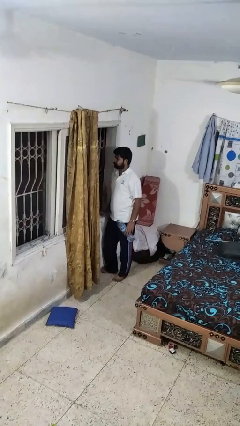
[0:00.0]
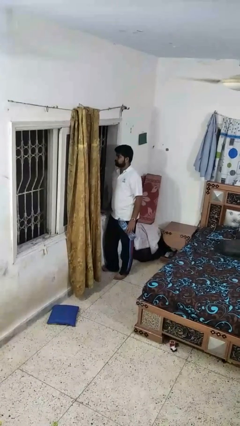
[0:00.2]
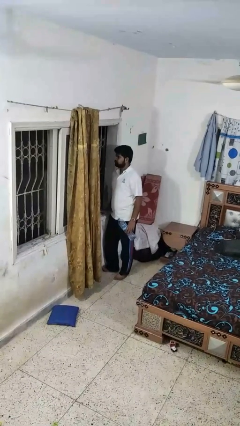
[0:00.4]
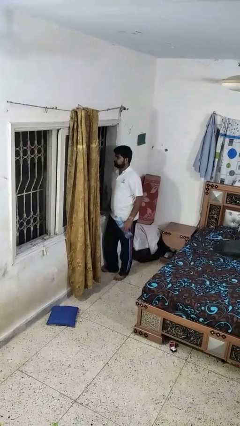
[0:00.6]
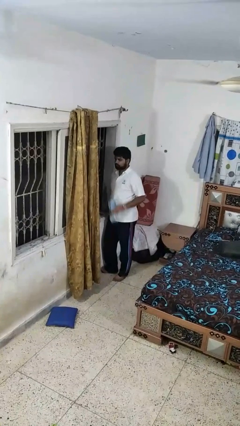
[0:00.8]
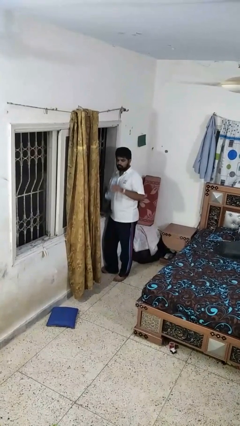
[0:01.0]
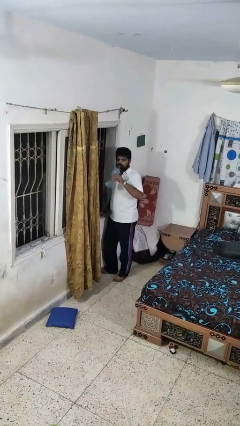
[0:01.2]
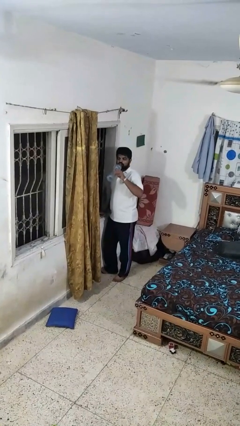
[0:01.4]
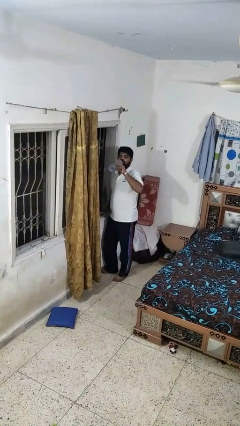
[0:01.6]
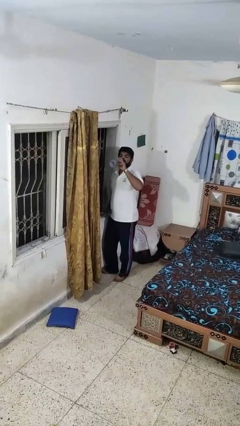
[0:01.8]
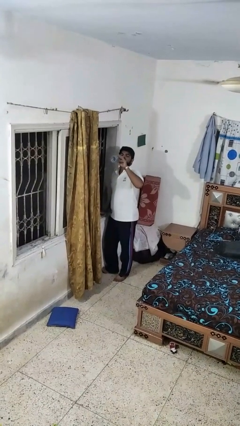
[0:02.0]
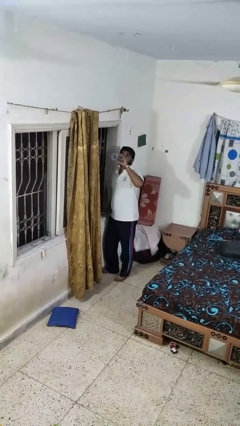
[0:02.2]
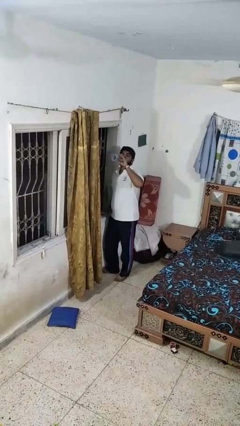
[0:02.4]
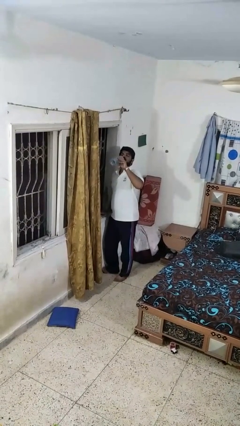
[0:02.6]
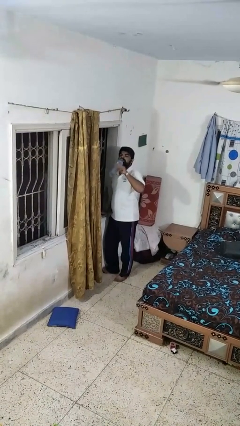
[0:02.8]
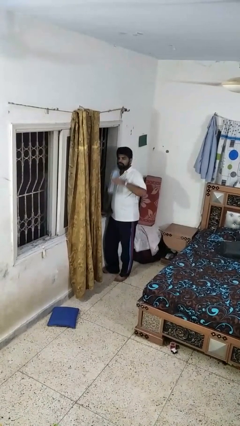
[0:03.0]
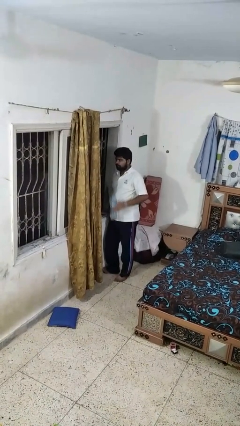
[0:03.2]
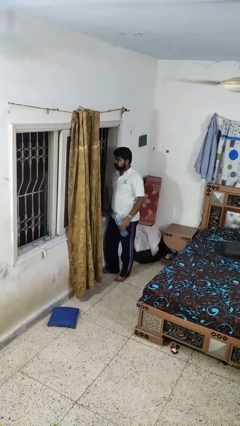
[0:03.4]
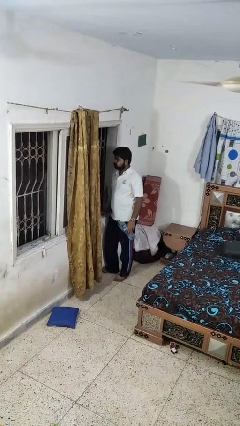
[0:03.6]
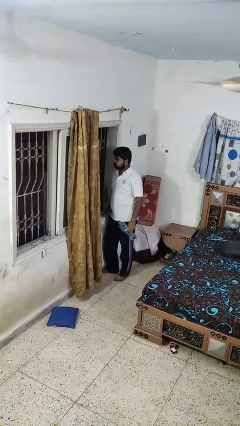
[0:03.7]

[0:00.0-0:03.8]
person drinks from bottle

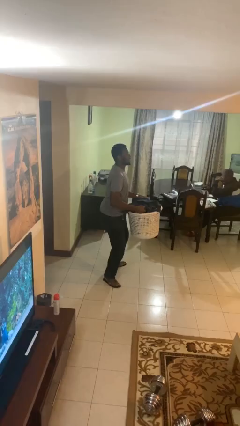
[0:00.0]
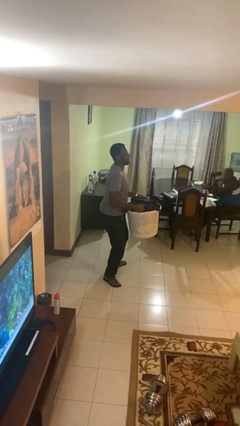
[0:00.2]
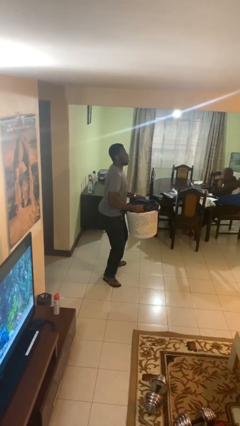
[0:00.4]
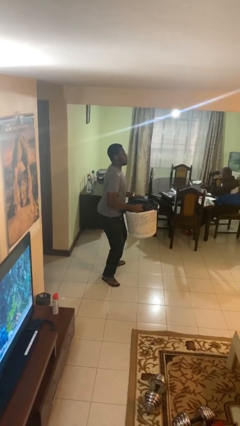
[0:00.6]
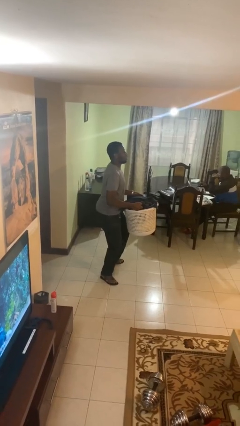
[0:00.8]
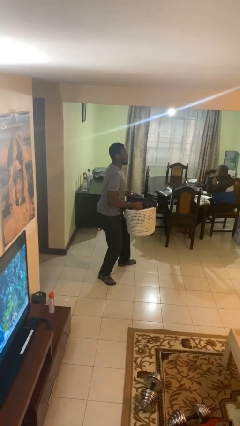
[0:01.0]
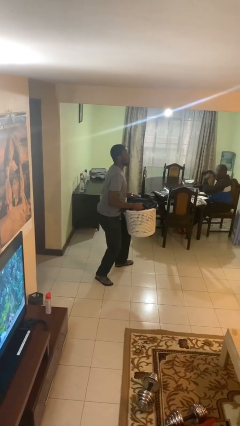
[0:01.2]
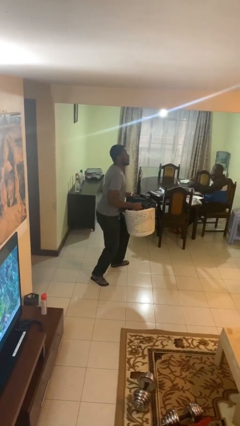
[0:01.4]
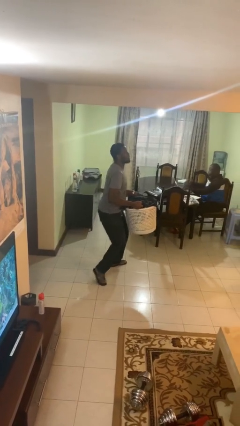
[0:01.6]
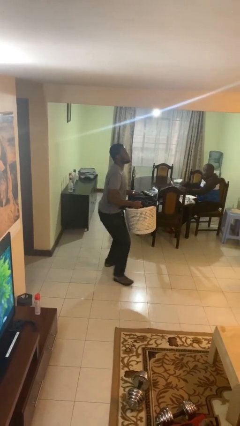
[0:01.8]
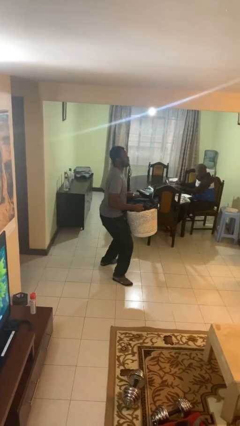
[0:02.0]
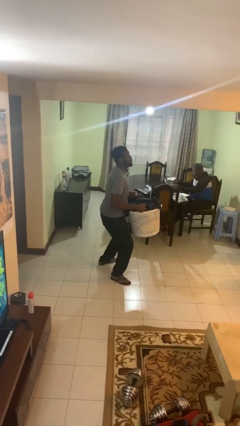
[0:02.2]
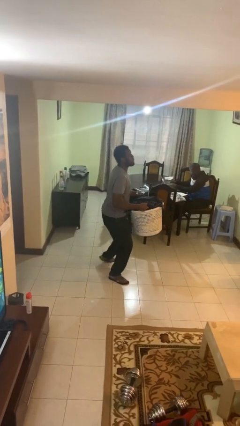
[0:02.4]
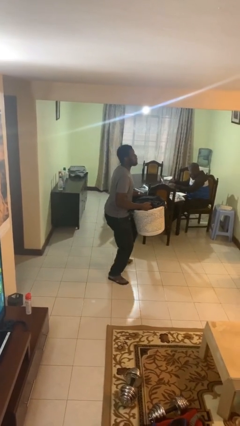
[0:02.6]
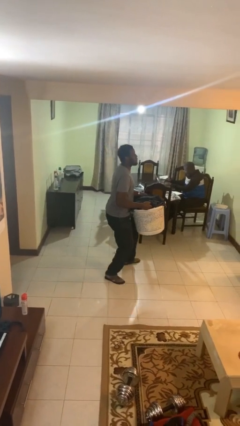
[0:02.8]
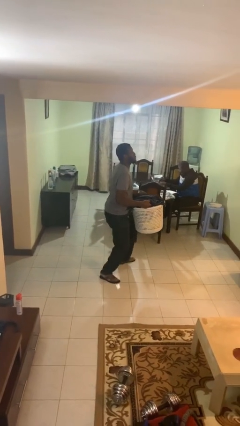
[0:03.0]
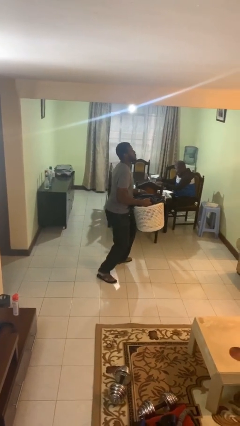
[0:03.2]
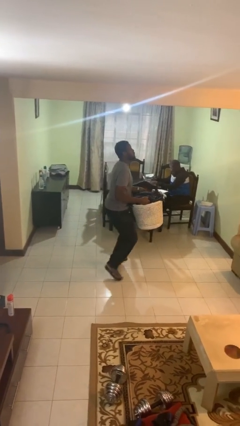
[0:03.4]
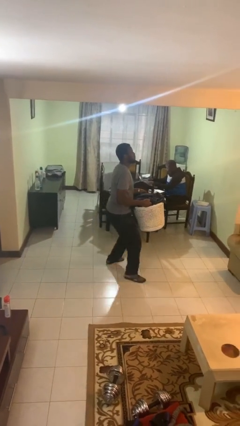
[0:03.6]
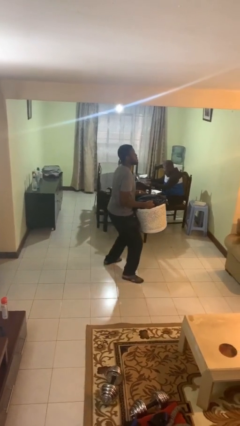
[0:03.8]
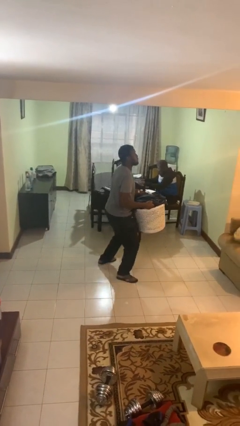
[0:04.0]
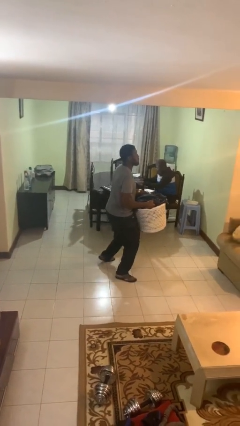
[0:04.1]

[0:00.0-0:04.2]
person carries heavy object

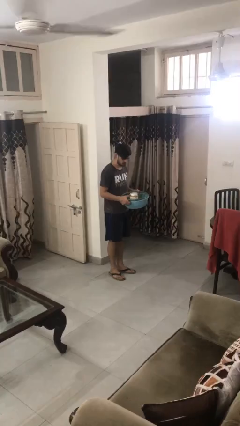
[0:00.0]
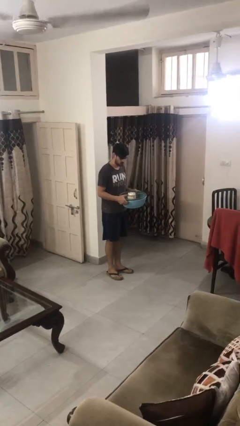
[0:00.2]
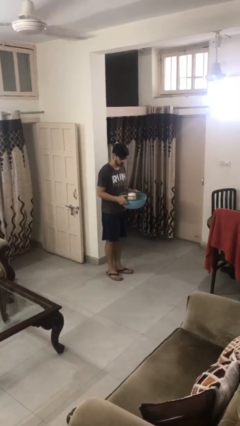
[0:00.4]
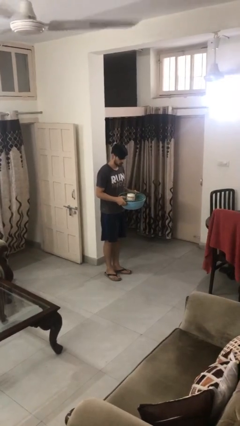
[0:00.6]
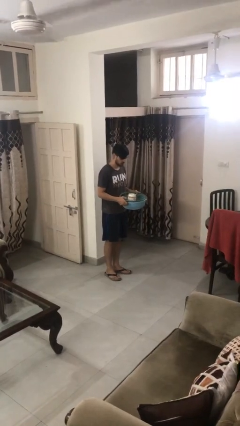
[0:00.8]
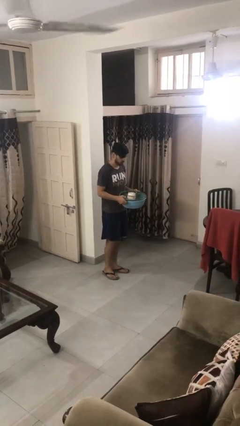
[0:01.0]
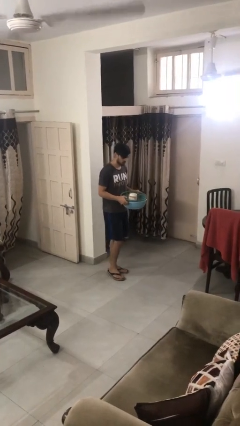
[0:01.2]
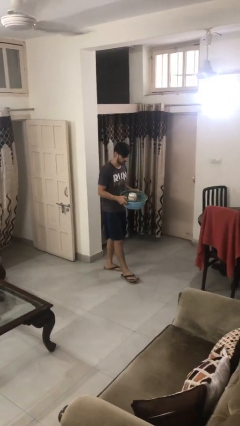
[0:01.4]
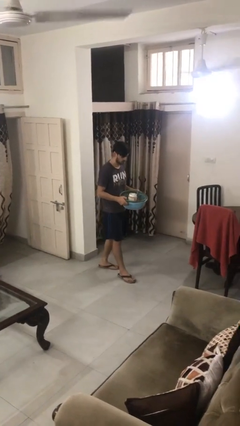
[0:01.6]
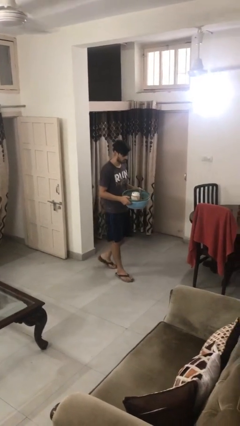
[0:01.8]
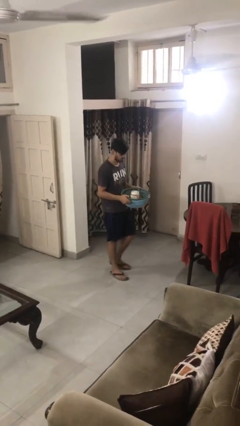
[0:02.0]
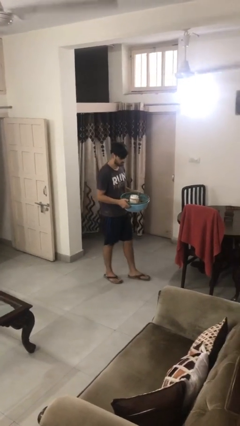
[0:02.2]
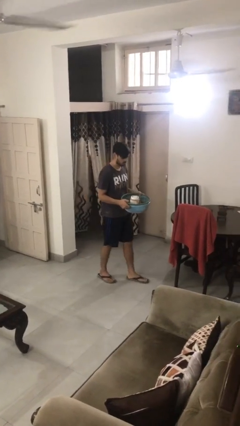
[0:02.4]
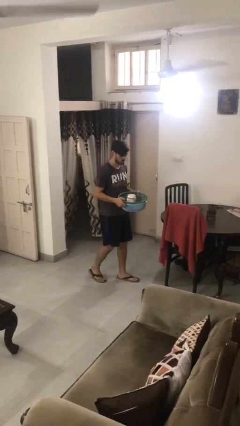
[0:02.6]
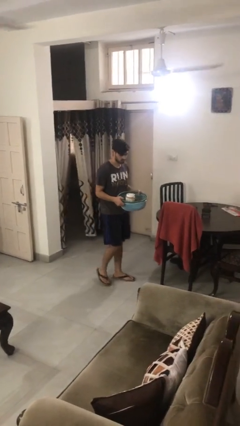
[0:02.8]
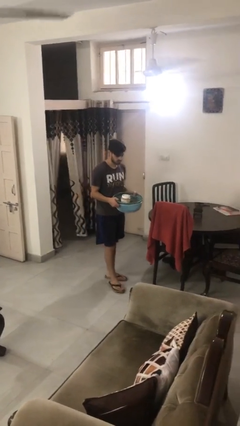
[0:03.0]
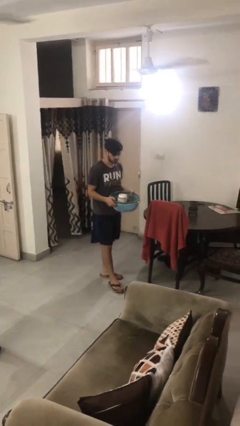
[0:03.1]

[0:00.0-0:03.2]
person carries groceries

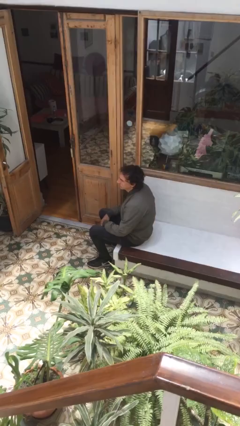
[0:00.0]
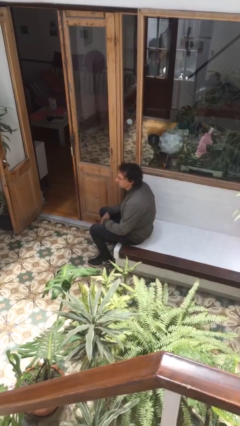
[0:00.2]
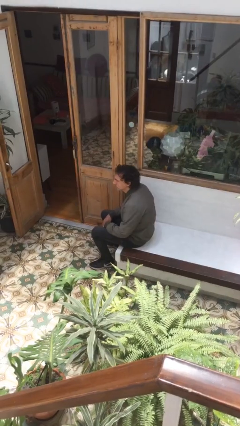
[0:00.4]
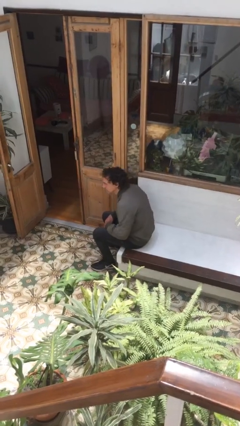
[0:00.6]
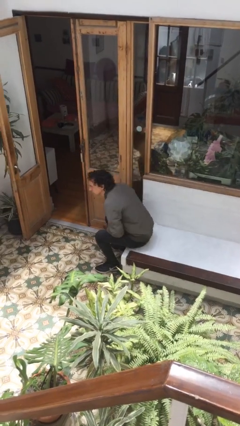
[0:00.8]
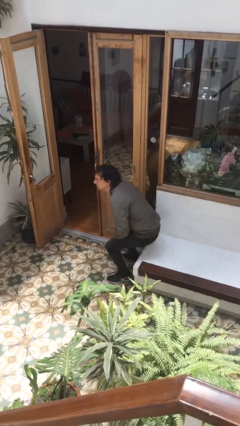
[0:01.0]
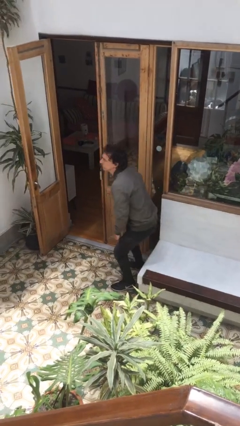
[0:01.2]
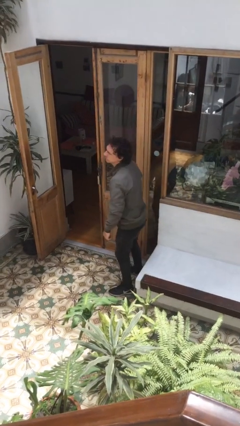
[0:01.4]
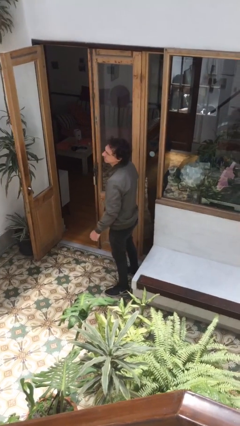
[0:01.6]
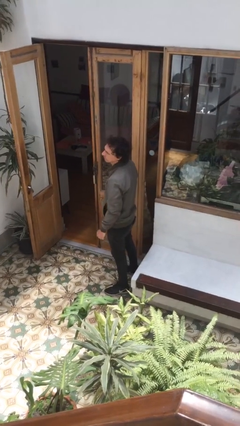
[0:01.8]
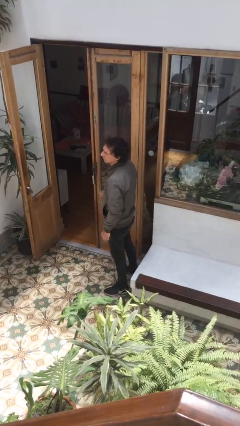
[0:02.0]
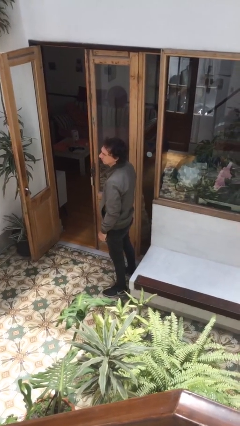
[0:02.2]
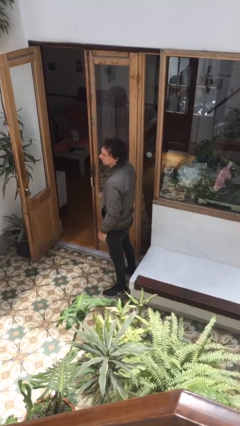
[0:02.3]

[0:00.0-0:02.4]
person stands up

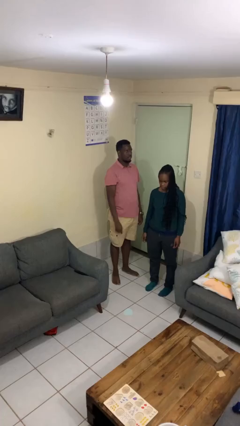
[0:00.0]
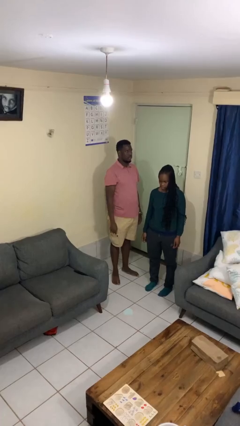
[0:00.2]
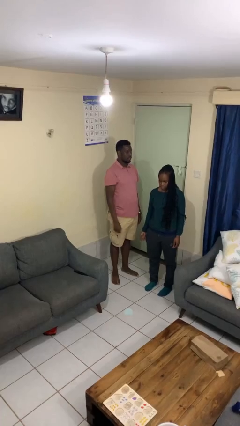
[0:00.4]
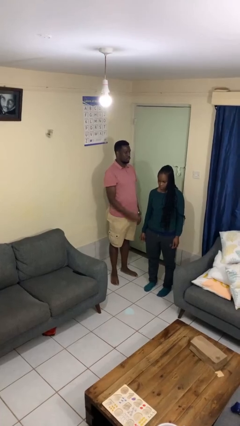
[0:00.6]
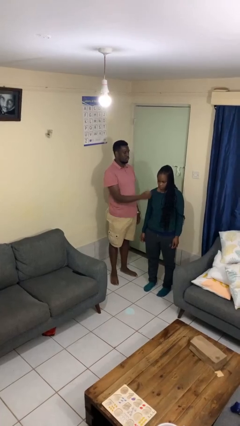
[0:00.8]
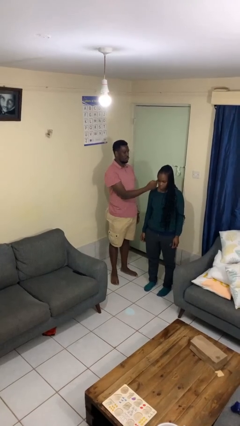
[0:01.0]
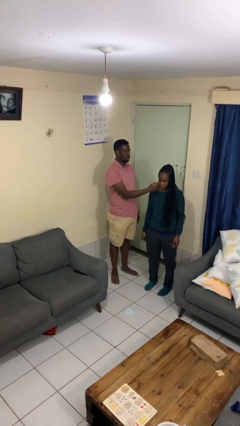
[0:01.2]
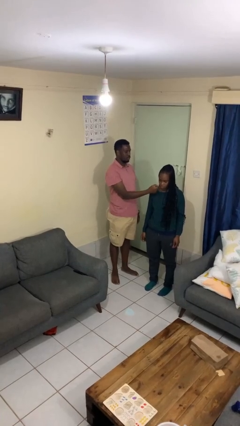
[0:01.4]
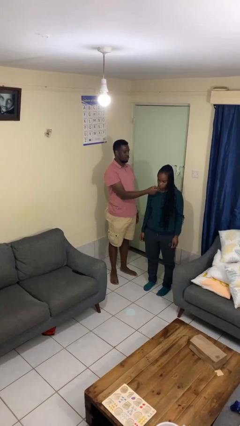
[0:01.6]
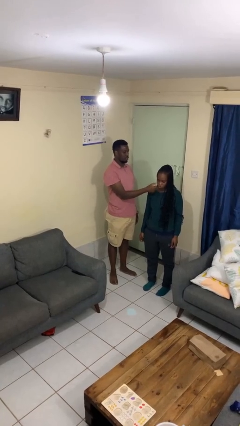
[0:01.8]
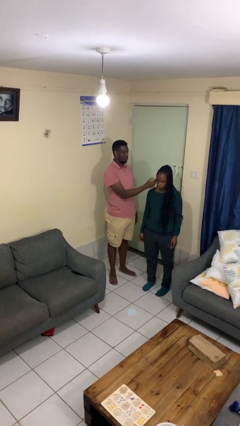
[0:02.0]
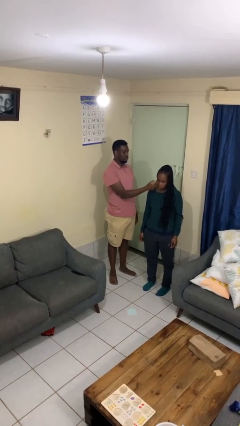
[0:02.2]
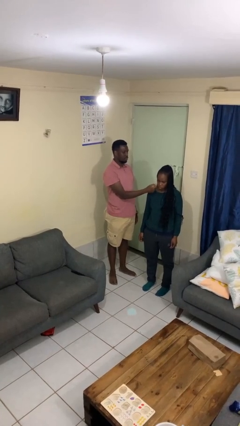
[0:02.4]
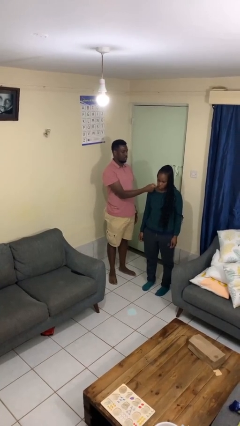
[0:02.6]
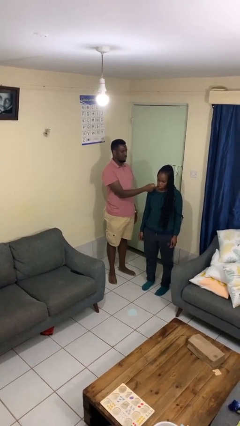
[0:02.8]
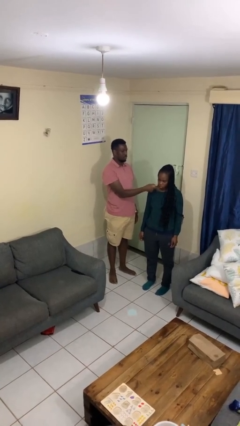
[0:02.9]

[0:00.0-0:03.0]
person touches face of person

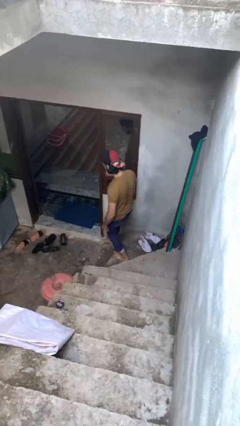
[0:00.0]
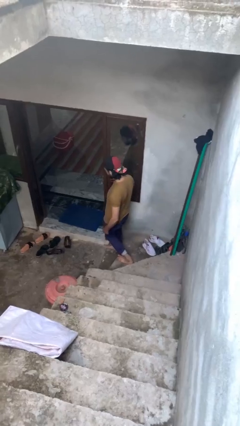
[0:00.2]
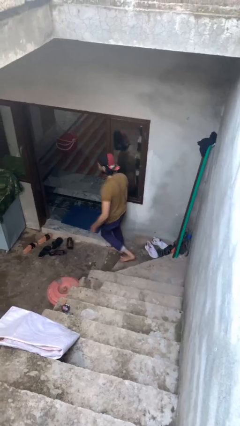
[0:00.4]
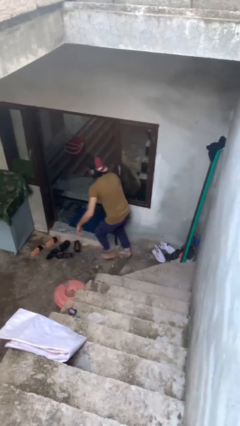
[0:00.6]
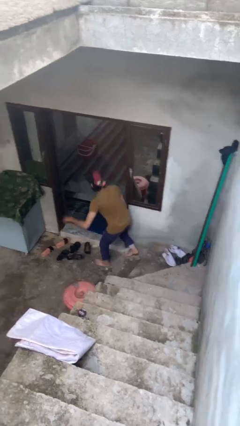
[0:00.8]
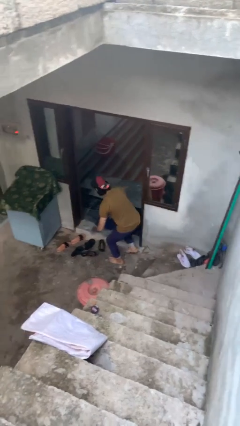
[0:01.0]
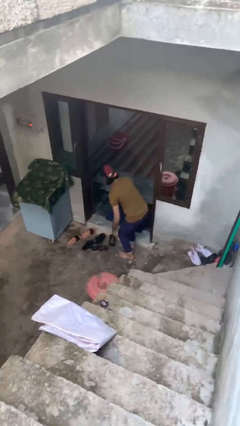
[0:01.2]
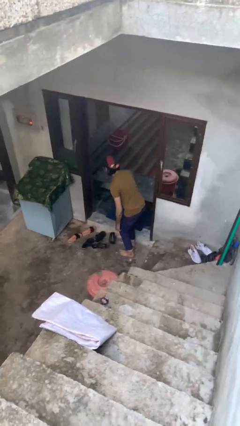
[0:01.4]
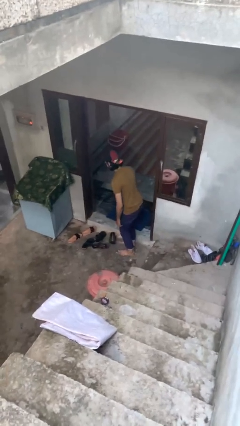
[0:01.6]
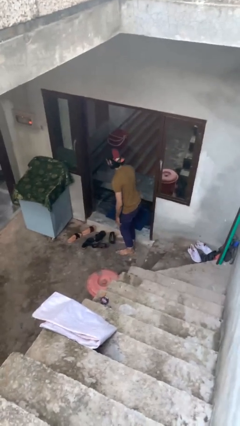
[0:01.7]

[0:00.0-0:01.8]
person trips on stair
